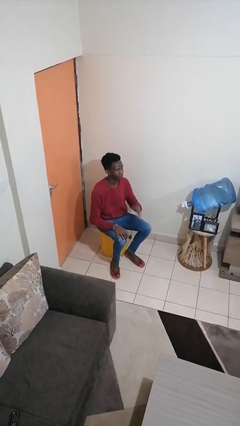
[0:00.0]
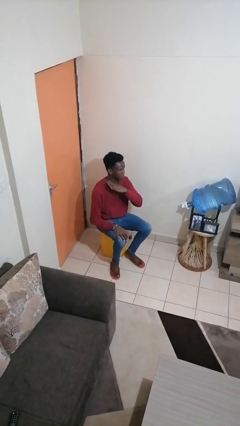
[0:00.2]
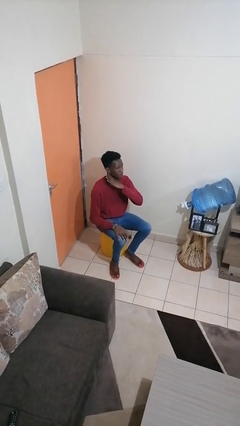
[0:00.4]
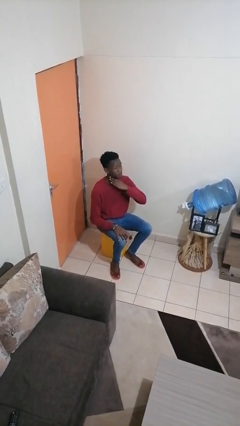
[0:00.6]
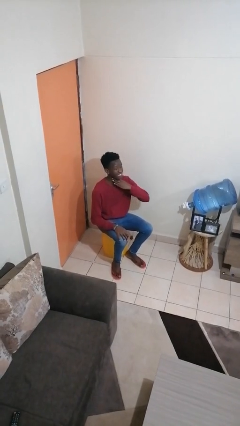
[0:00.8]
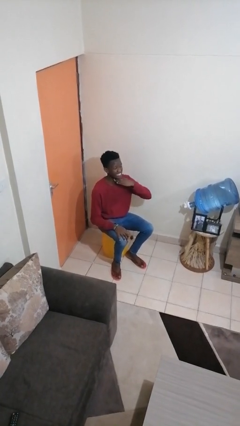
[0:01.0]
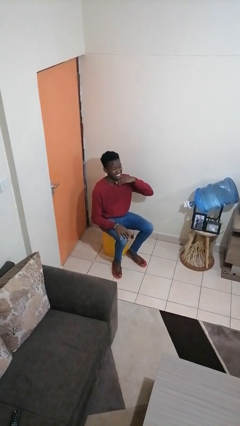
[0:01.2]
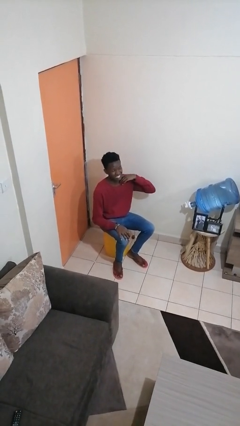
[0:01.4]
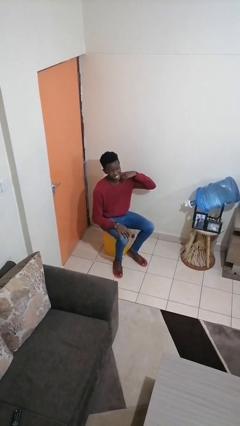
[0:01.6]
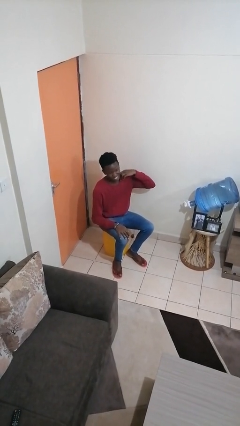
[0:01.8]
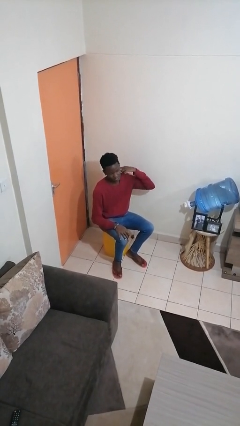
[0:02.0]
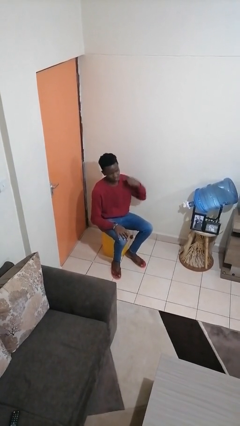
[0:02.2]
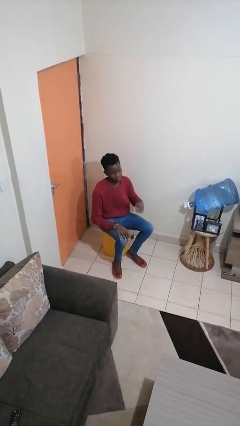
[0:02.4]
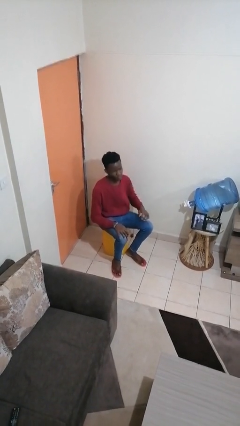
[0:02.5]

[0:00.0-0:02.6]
person gestures cut

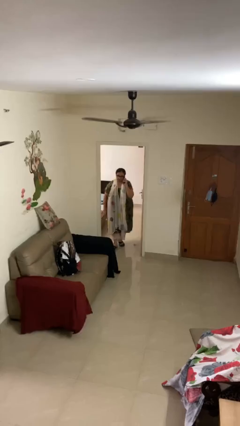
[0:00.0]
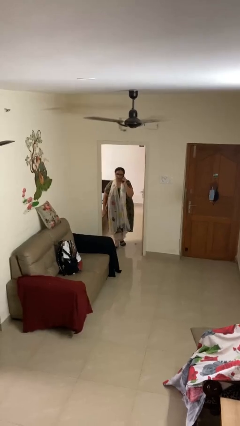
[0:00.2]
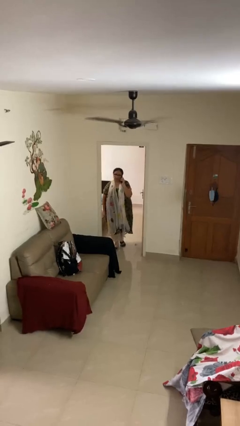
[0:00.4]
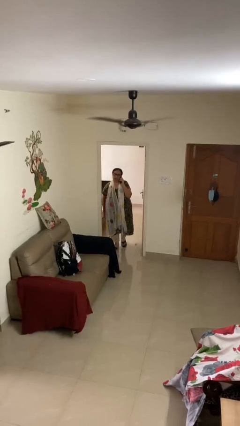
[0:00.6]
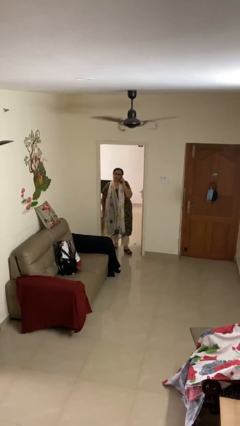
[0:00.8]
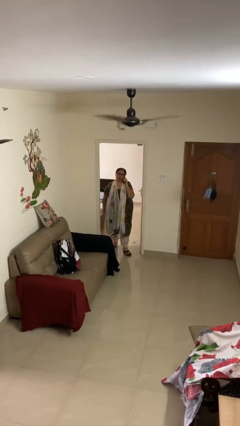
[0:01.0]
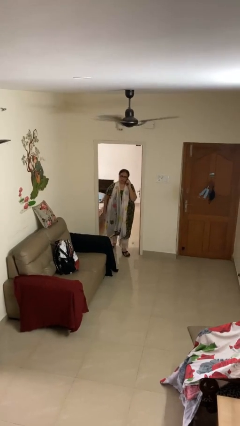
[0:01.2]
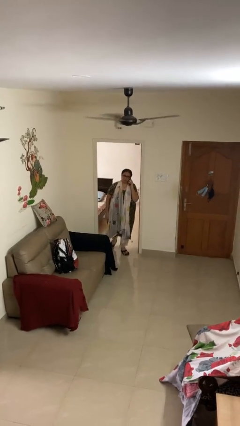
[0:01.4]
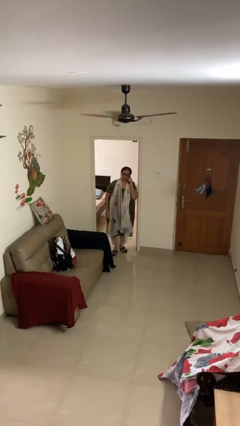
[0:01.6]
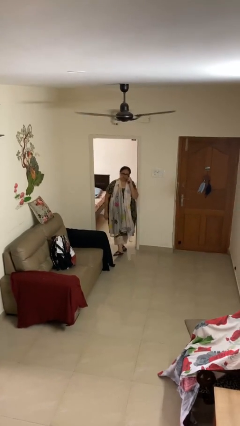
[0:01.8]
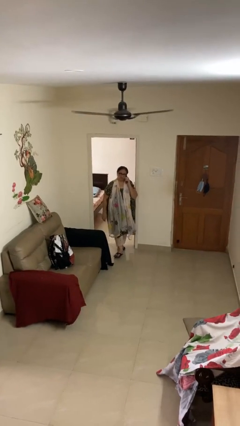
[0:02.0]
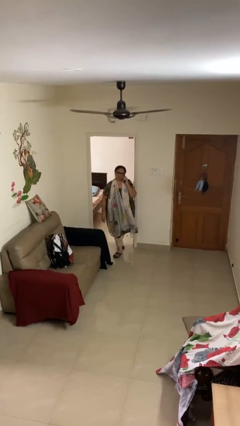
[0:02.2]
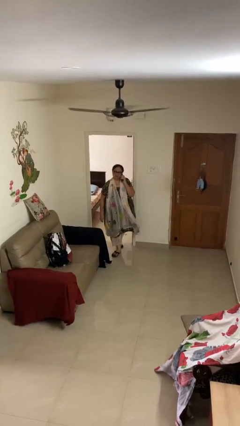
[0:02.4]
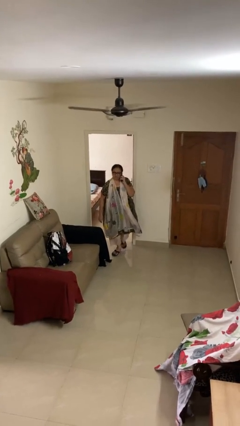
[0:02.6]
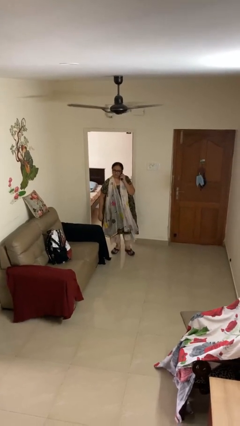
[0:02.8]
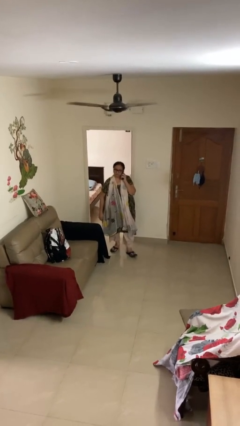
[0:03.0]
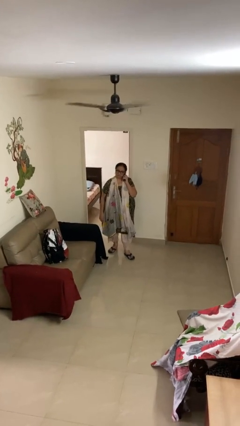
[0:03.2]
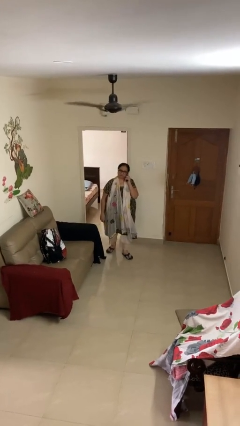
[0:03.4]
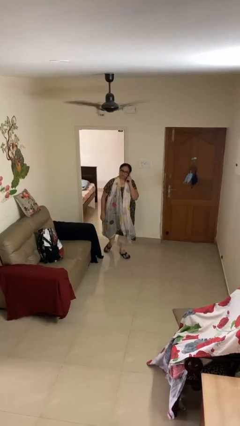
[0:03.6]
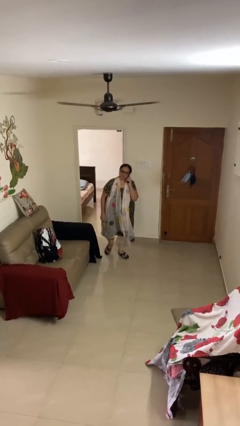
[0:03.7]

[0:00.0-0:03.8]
person enters scene through structure

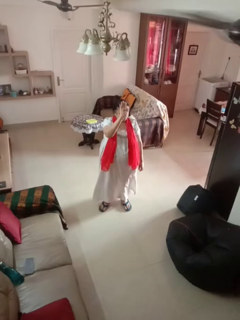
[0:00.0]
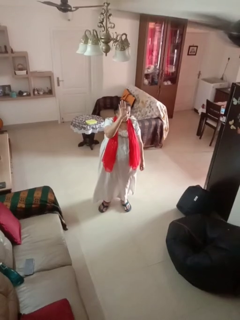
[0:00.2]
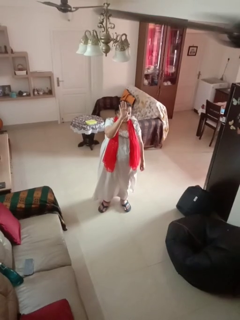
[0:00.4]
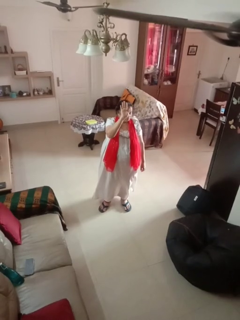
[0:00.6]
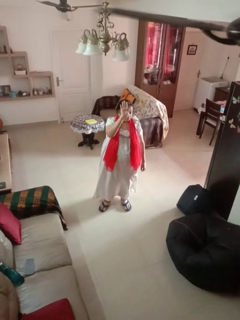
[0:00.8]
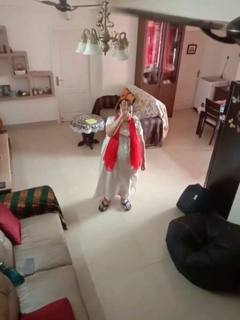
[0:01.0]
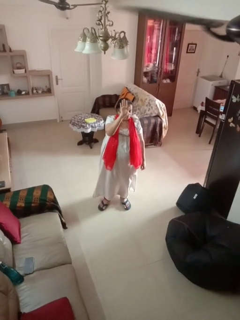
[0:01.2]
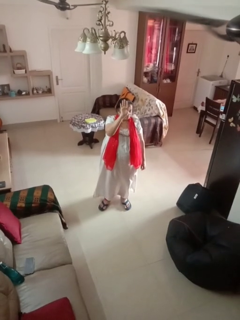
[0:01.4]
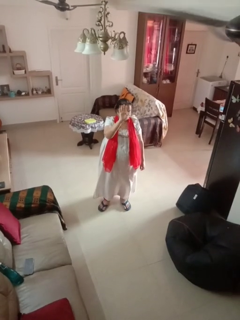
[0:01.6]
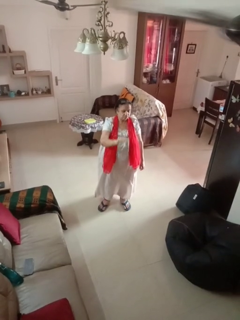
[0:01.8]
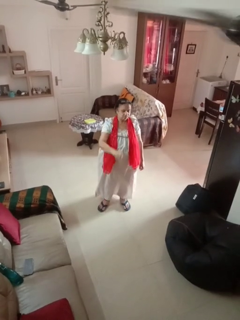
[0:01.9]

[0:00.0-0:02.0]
person gestures raise hand

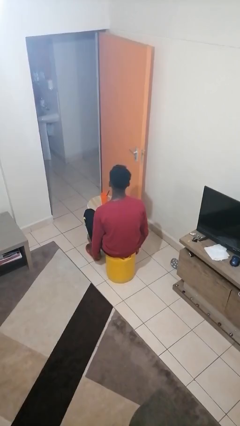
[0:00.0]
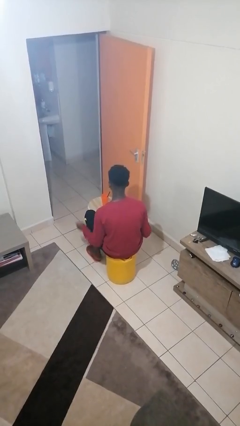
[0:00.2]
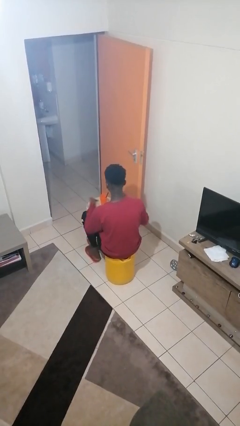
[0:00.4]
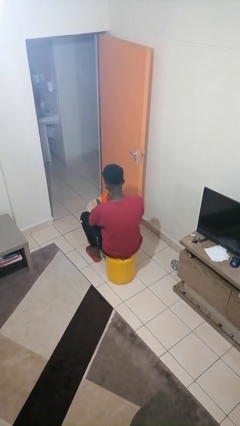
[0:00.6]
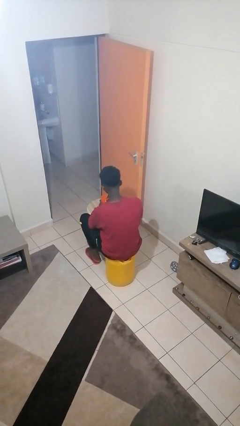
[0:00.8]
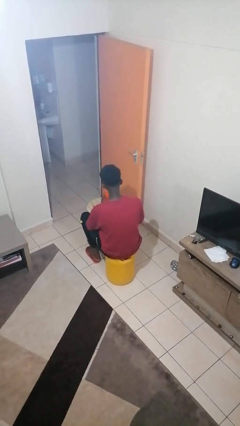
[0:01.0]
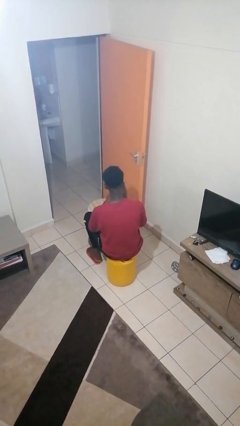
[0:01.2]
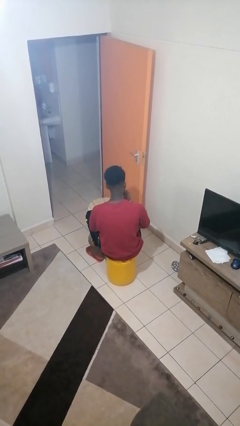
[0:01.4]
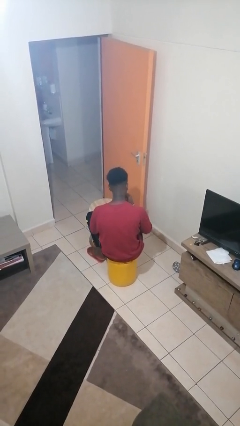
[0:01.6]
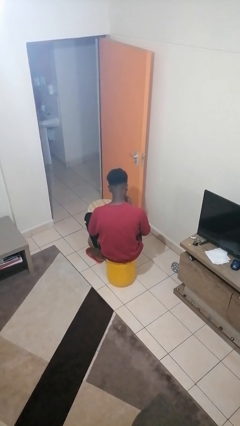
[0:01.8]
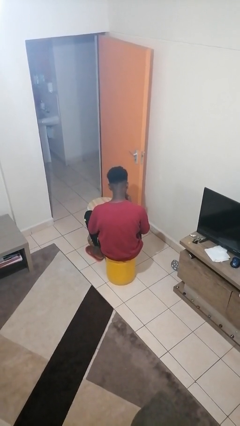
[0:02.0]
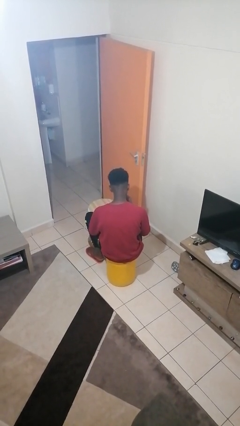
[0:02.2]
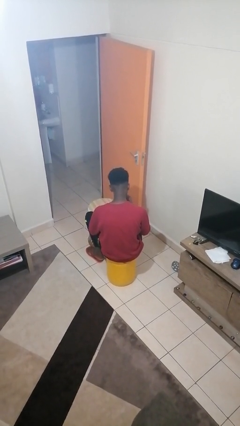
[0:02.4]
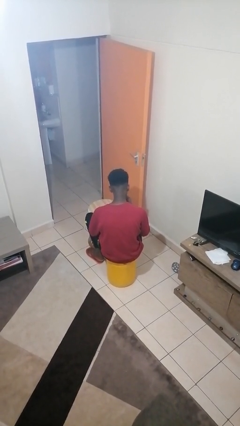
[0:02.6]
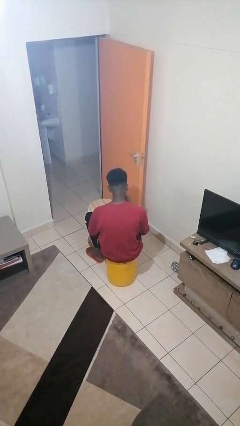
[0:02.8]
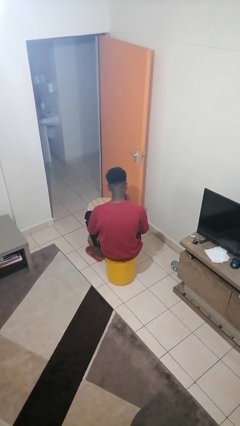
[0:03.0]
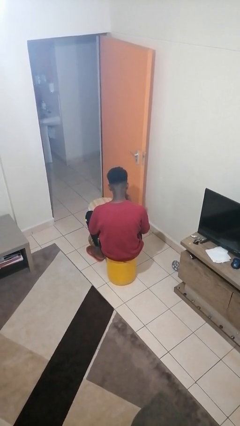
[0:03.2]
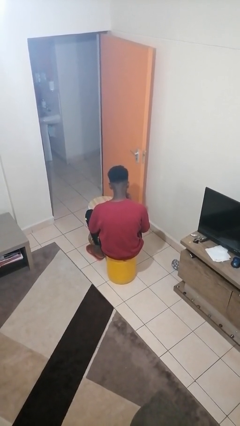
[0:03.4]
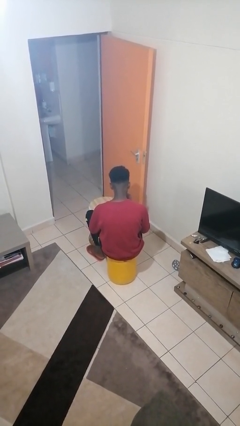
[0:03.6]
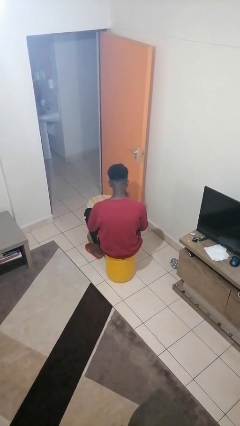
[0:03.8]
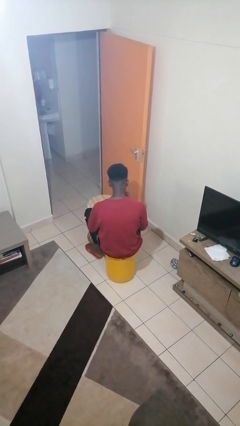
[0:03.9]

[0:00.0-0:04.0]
person drinks from straw

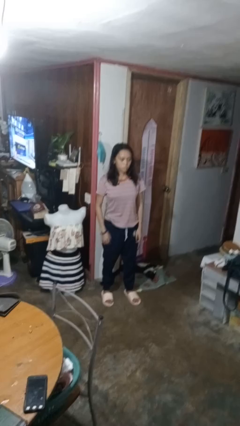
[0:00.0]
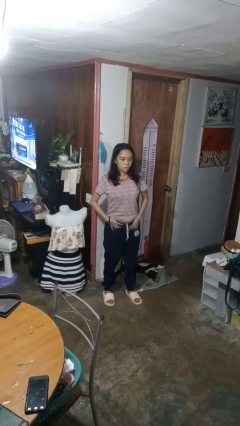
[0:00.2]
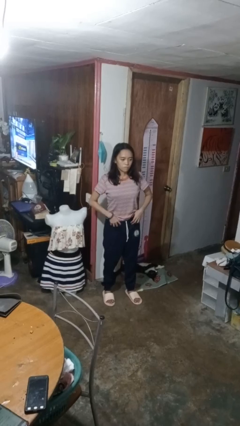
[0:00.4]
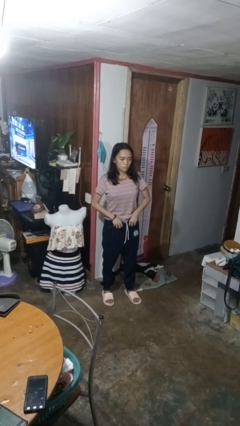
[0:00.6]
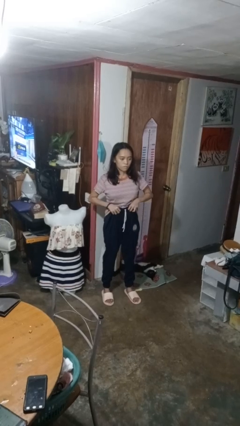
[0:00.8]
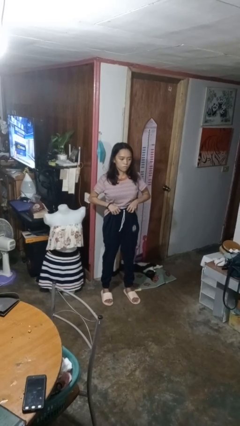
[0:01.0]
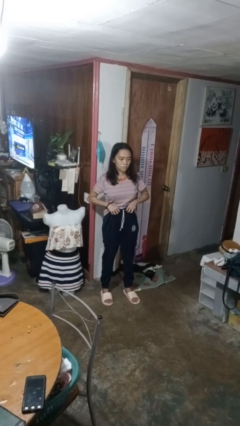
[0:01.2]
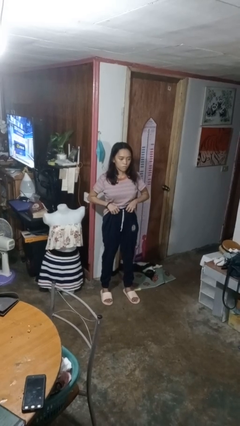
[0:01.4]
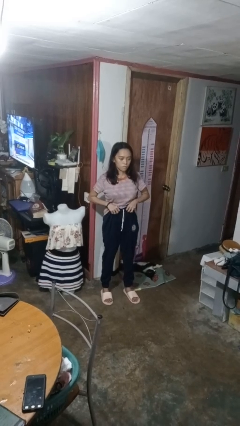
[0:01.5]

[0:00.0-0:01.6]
person hikes up pants

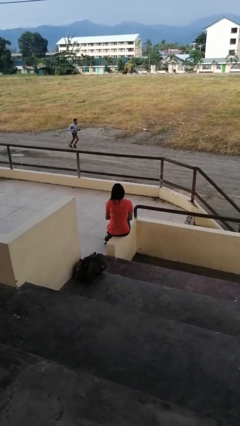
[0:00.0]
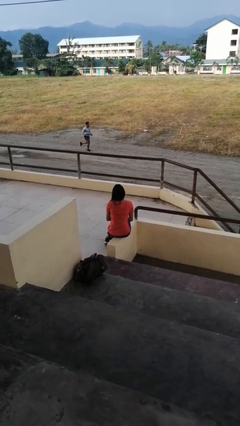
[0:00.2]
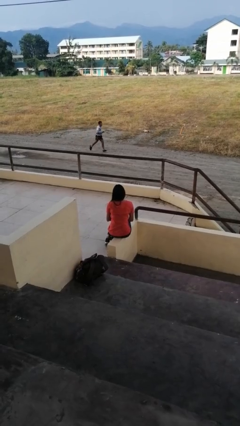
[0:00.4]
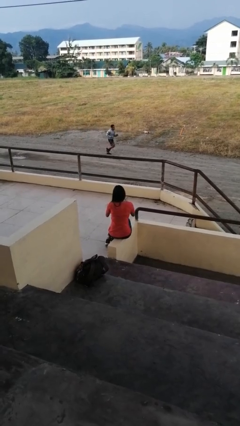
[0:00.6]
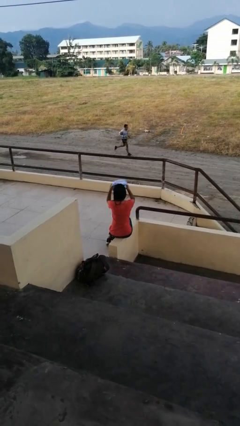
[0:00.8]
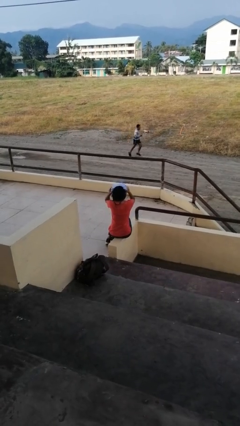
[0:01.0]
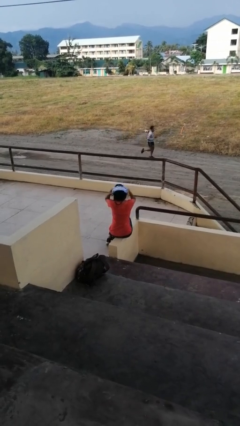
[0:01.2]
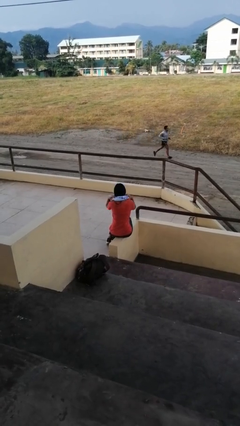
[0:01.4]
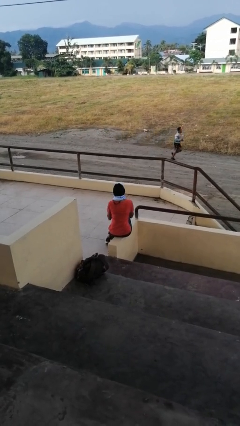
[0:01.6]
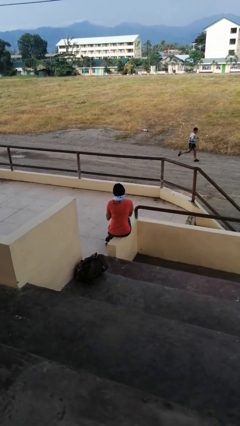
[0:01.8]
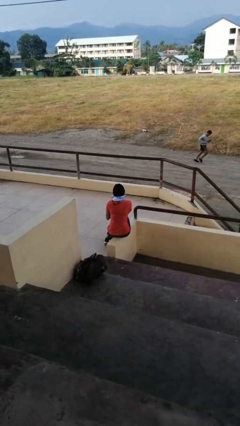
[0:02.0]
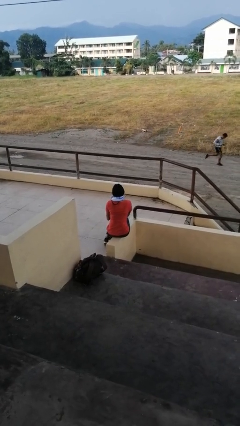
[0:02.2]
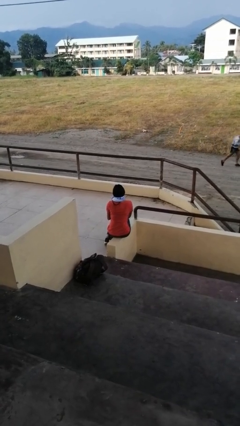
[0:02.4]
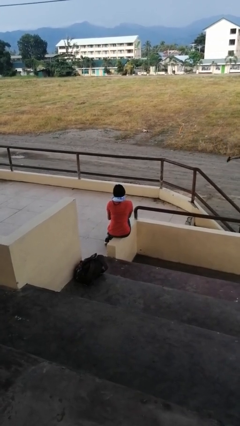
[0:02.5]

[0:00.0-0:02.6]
person puts on scarf

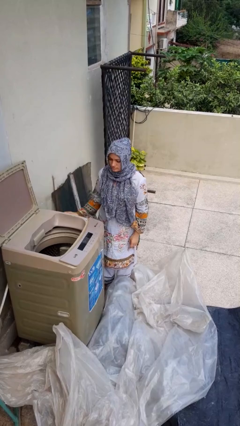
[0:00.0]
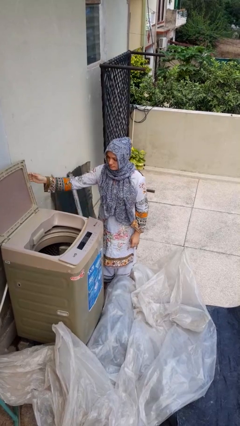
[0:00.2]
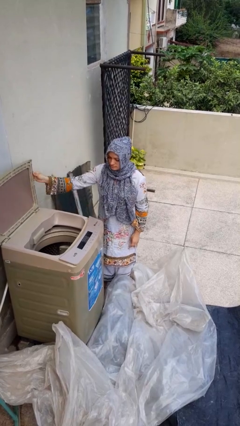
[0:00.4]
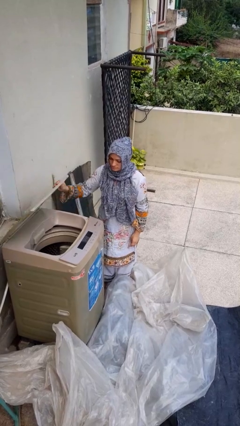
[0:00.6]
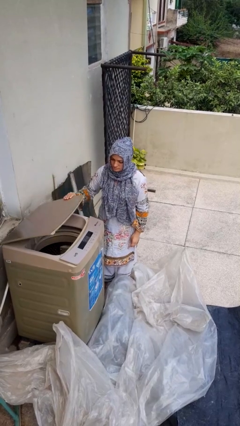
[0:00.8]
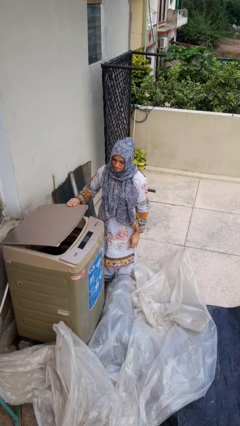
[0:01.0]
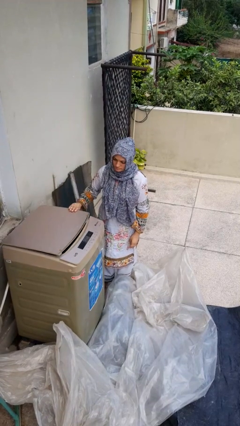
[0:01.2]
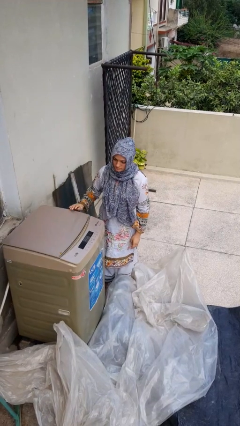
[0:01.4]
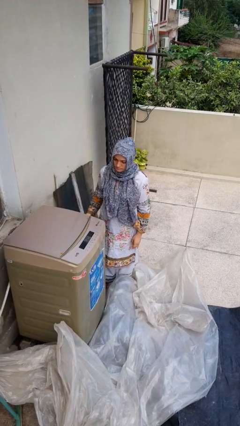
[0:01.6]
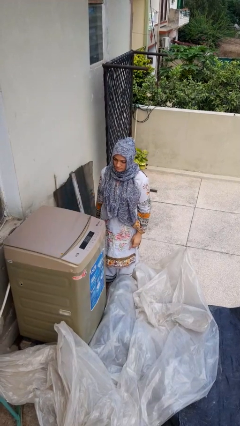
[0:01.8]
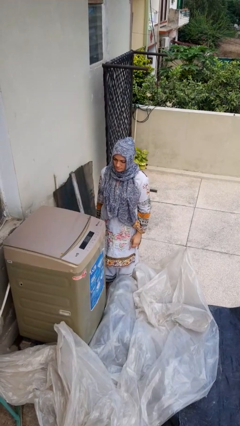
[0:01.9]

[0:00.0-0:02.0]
person closes clothes washer
